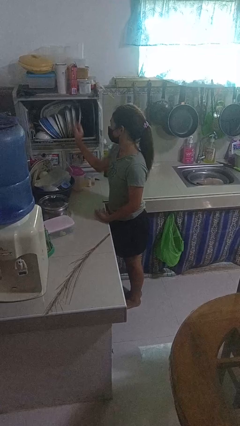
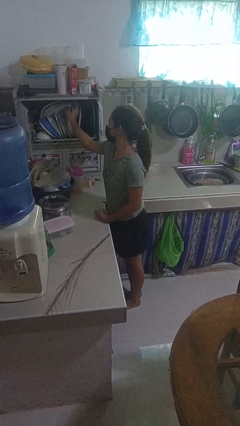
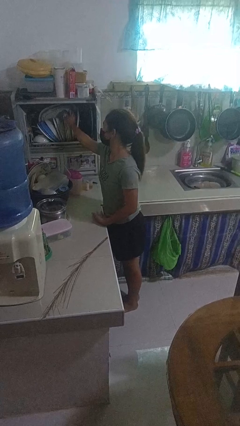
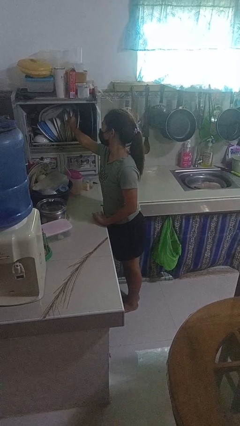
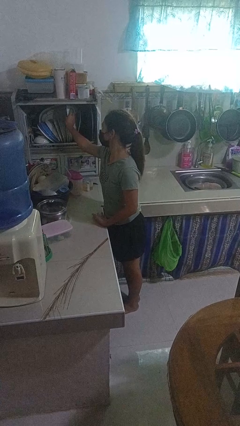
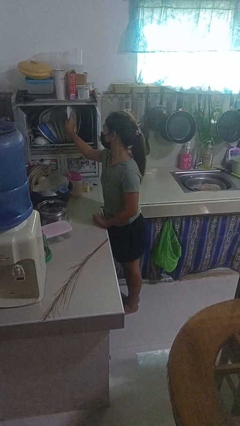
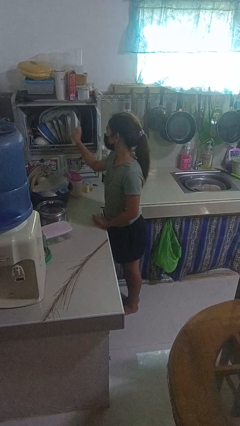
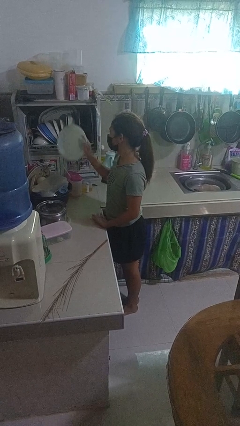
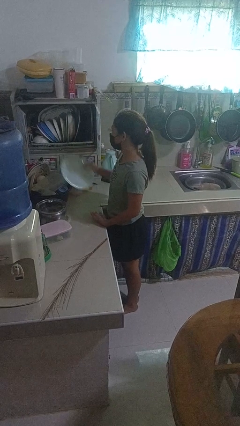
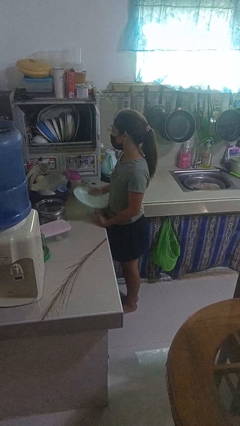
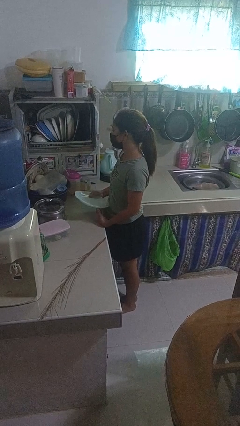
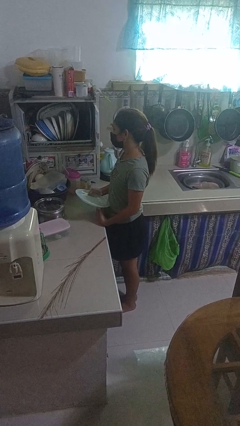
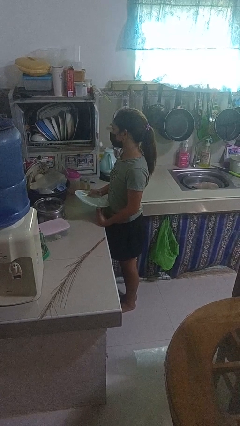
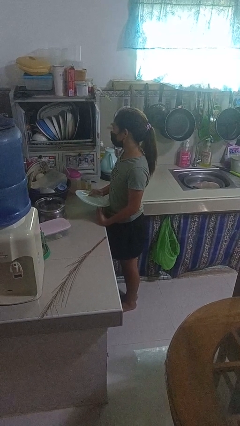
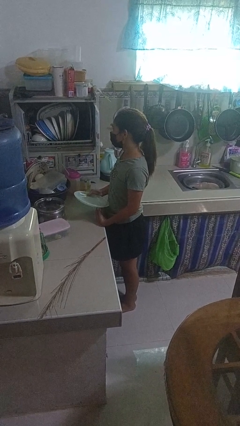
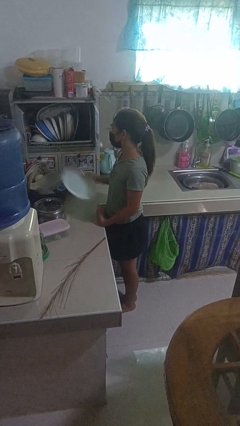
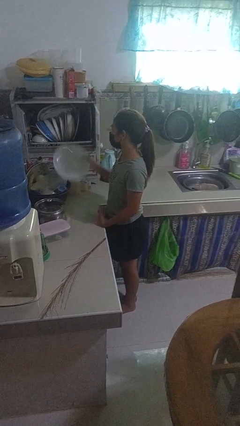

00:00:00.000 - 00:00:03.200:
person takes object from kitchen drawer

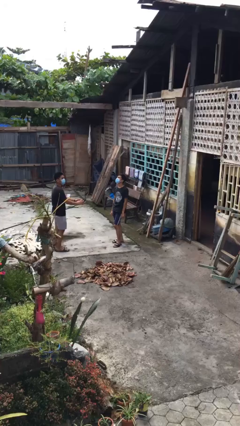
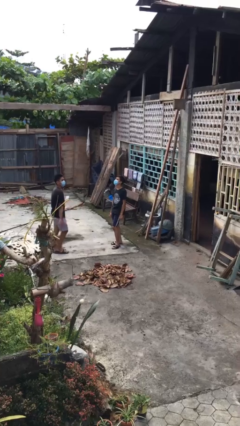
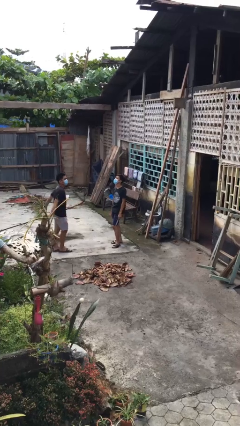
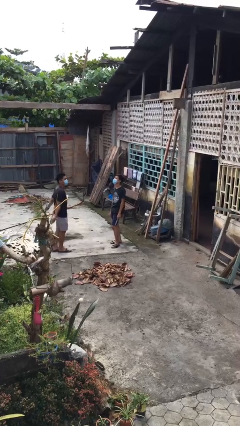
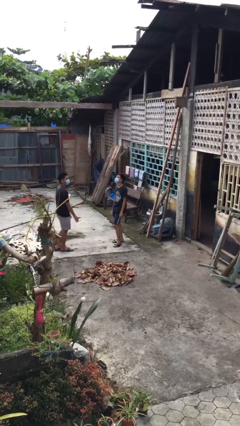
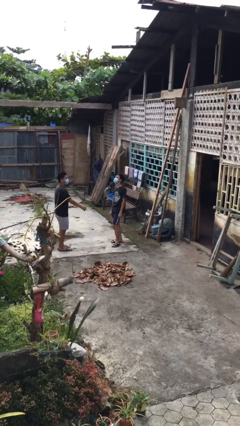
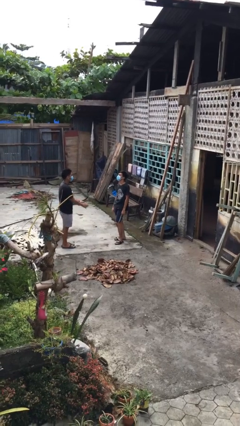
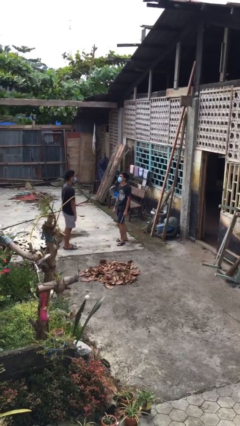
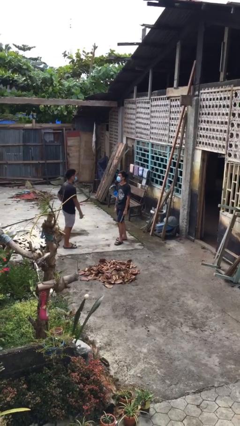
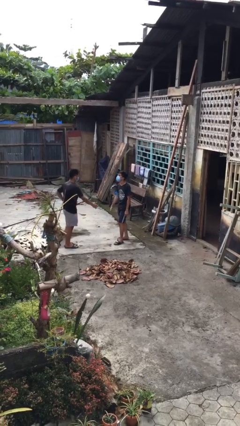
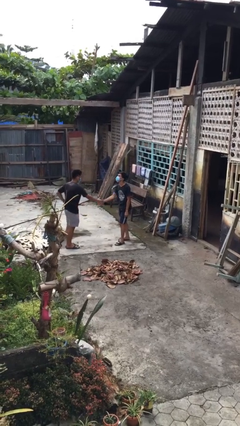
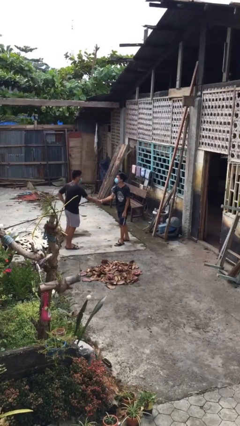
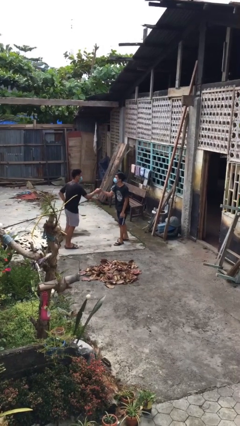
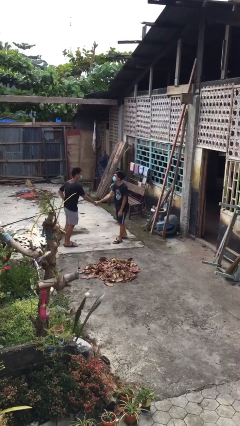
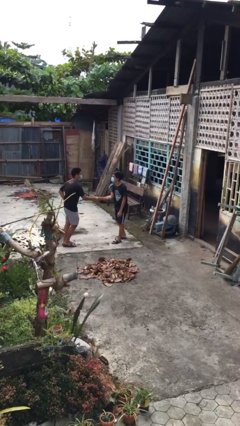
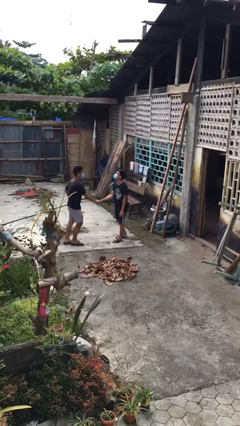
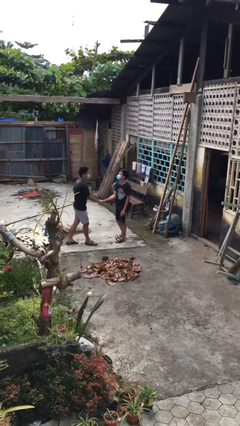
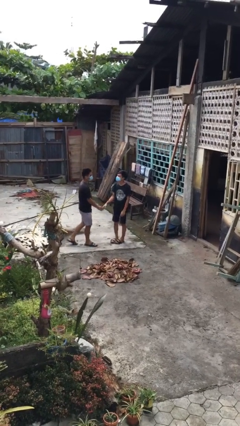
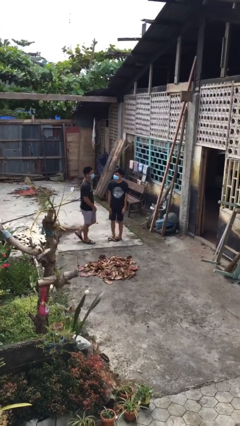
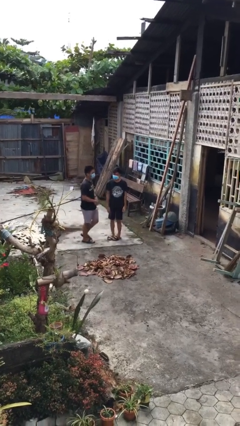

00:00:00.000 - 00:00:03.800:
person shakes hand

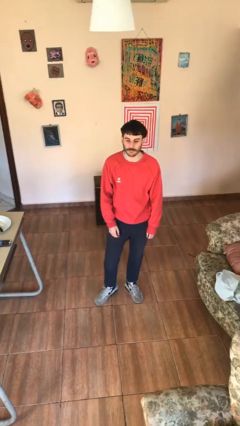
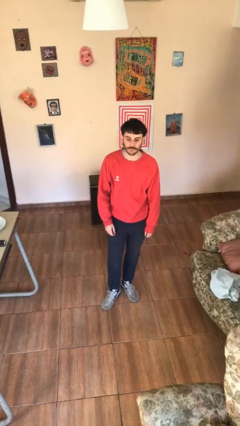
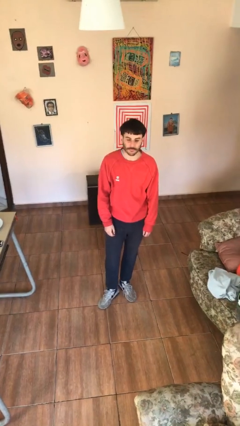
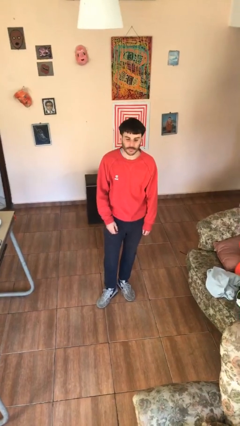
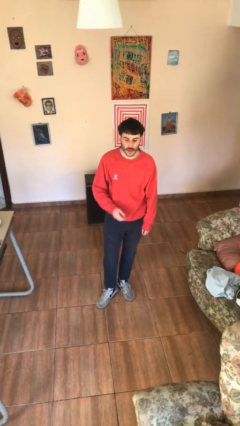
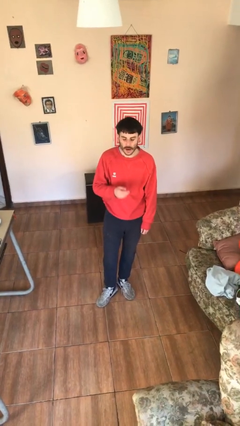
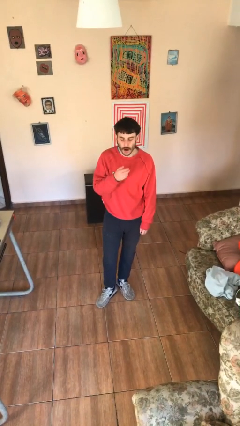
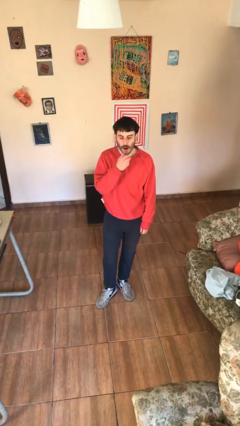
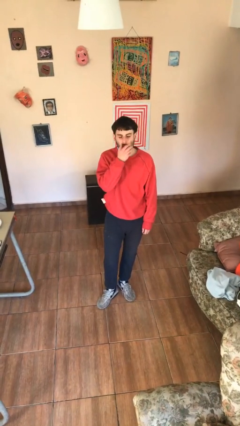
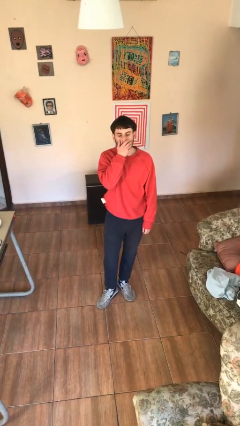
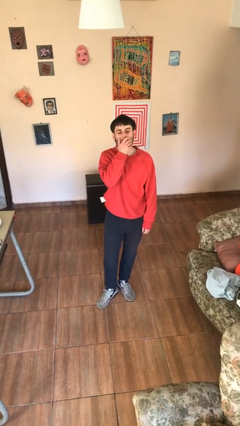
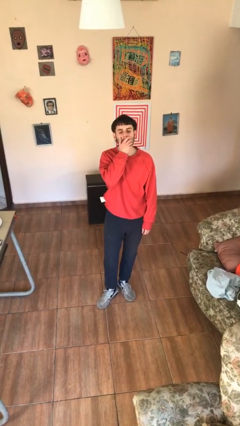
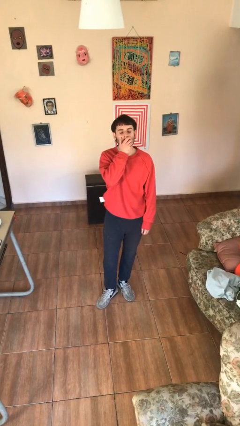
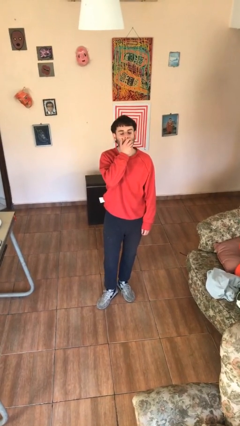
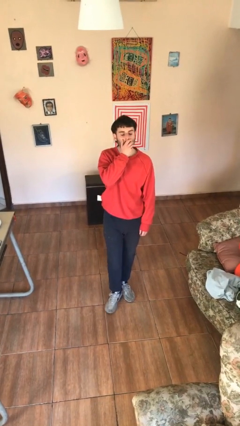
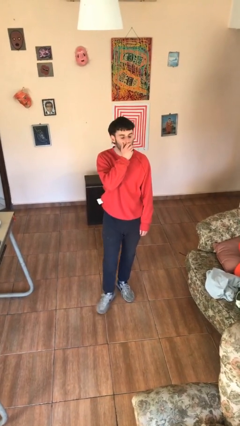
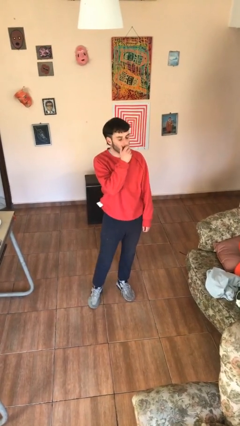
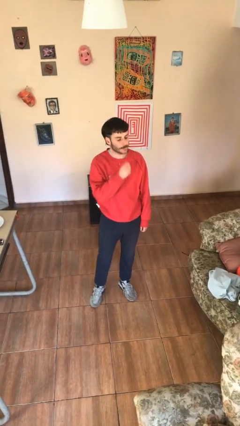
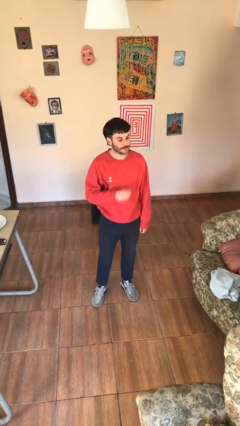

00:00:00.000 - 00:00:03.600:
person yawns

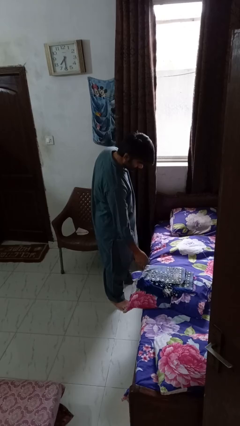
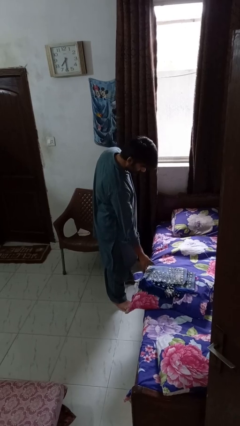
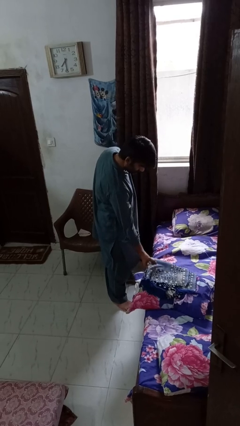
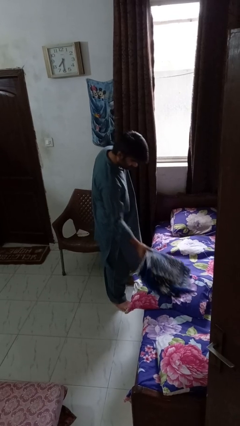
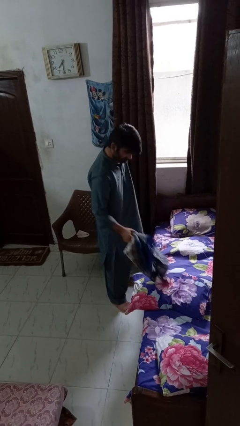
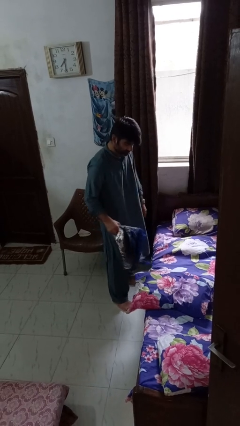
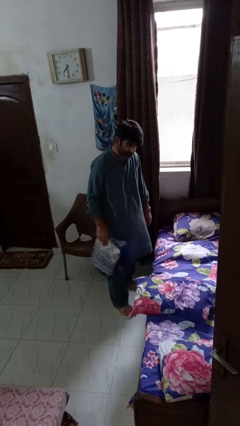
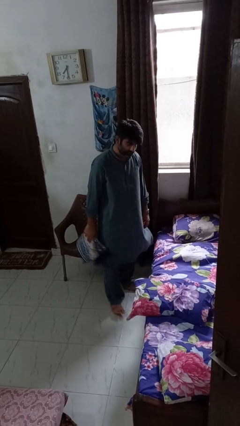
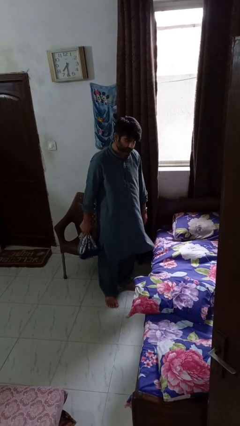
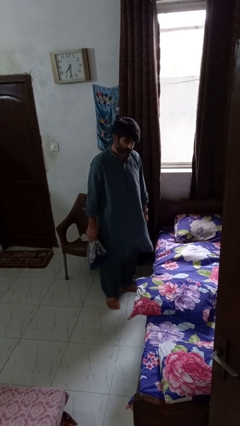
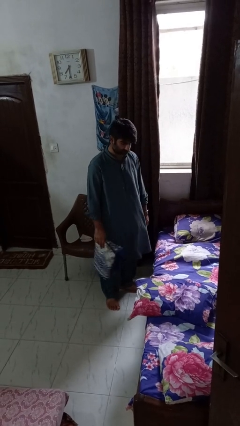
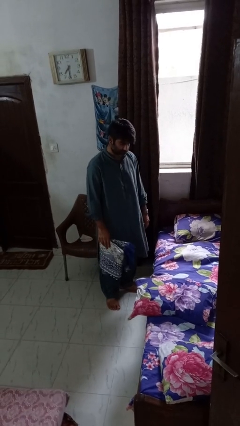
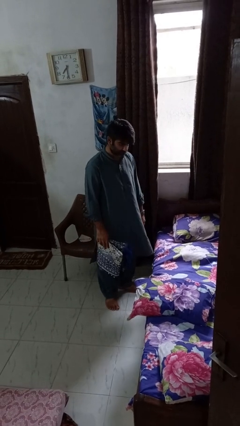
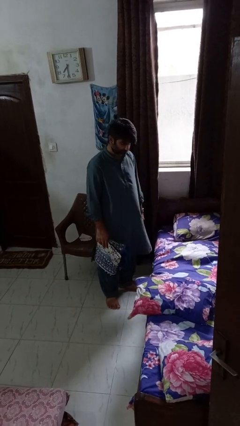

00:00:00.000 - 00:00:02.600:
person picks up object from bed

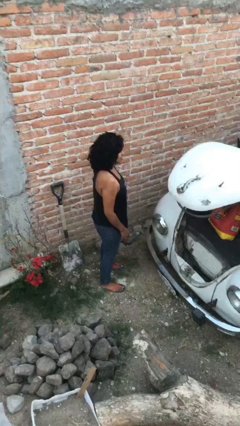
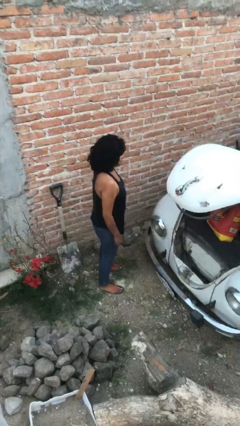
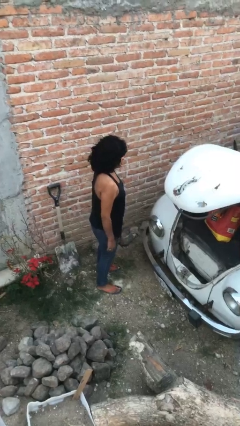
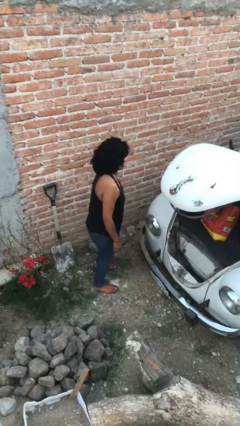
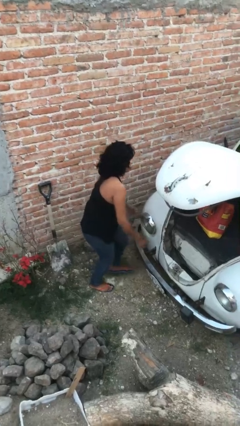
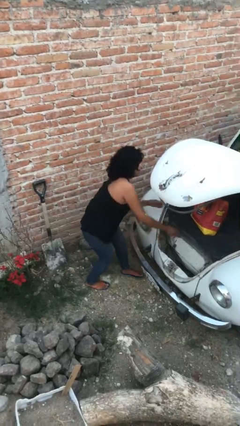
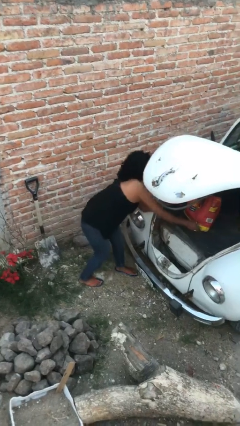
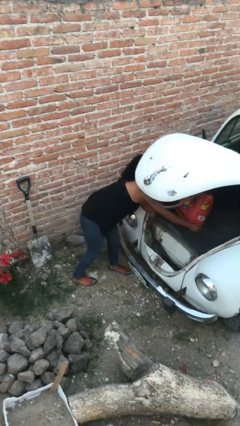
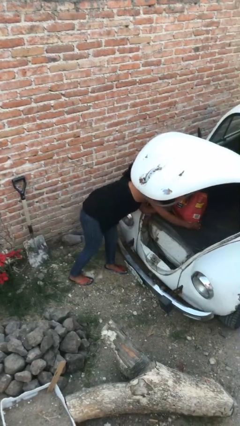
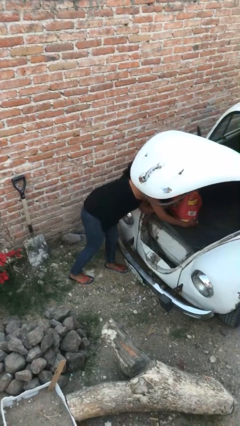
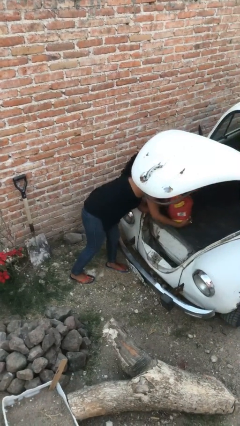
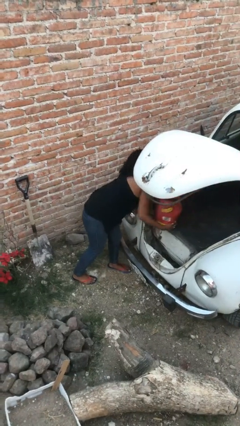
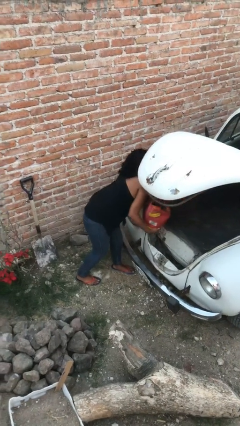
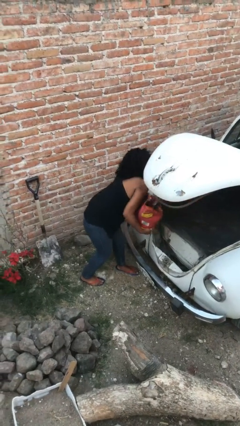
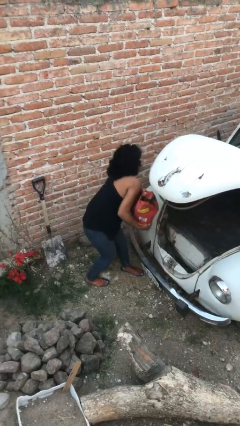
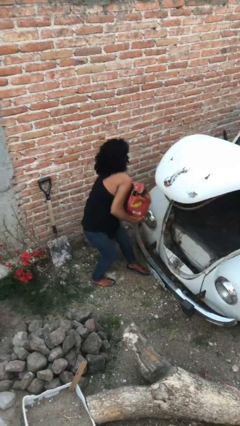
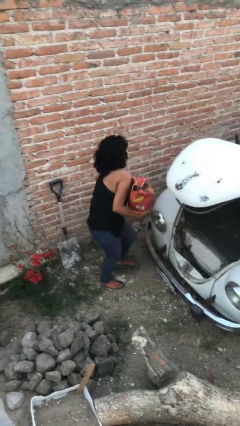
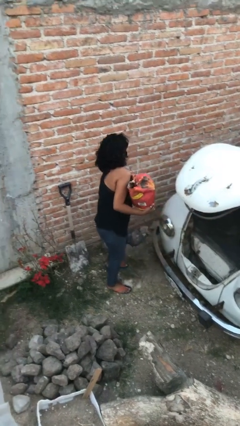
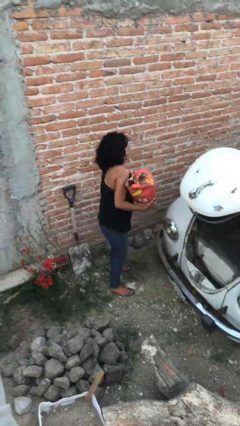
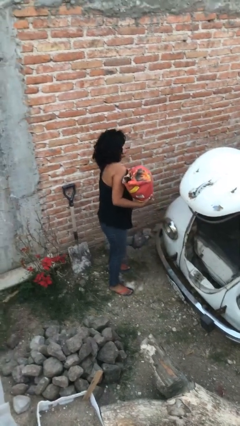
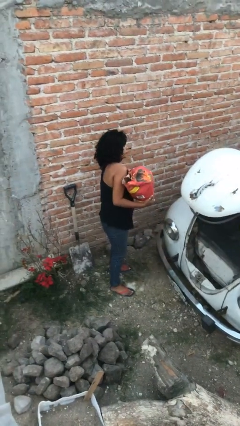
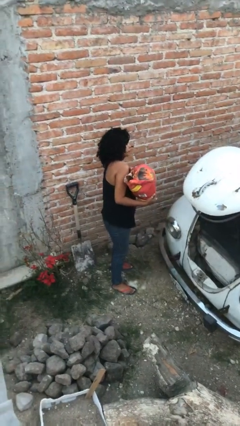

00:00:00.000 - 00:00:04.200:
person unloads car

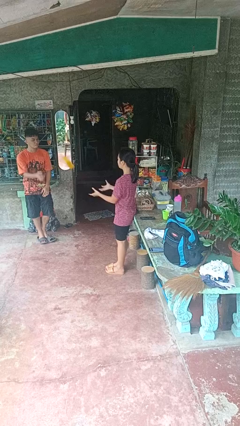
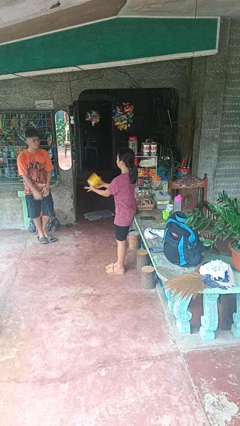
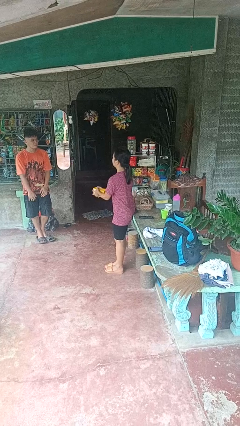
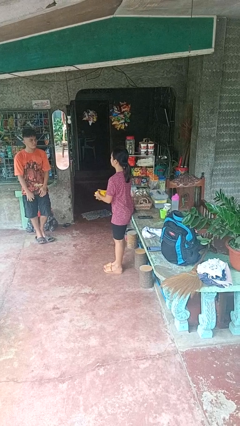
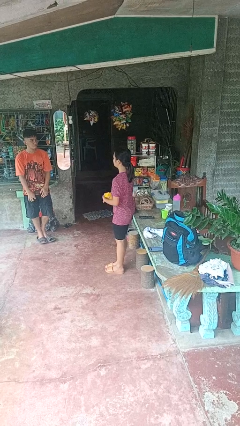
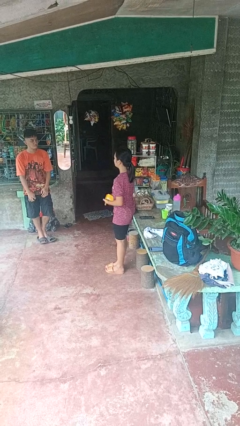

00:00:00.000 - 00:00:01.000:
person catches object from person
